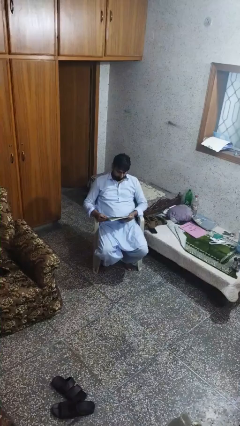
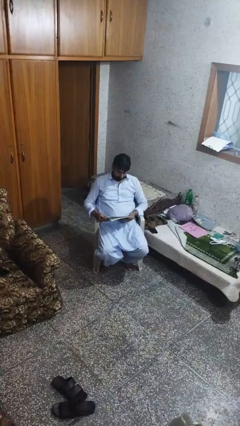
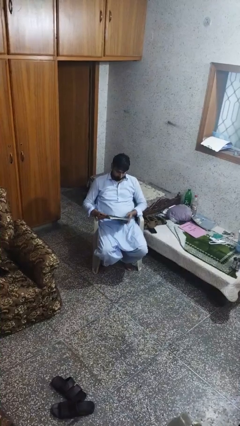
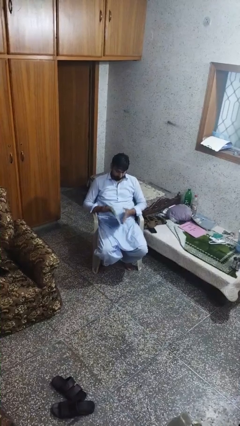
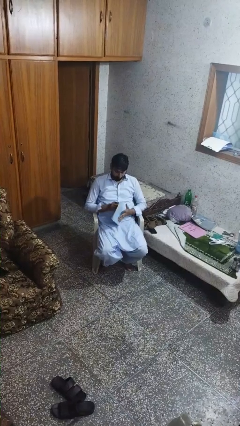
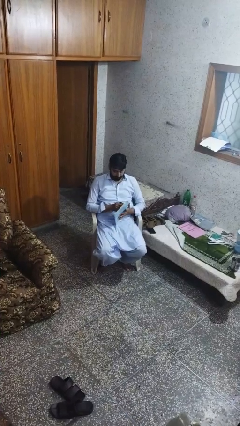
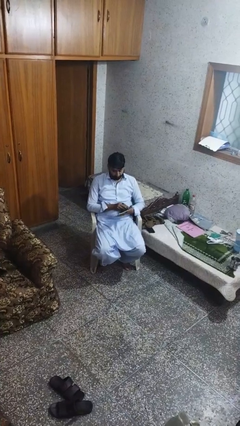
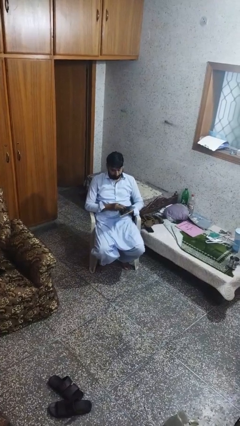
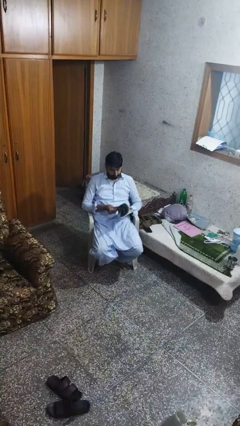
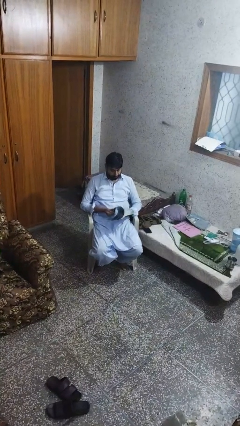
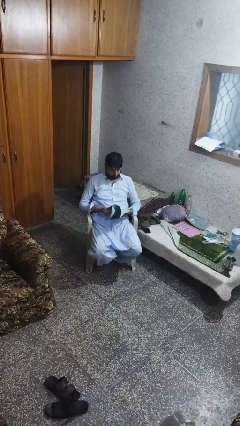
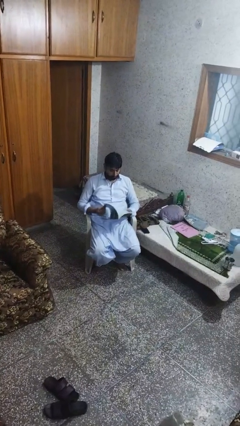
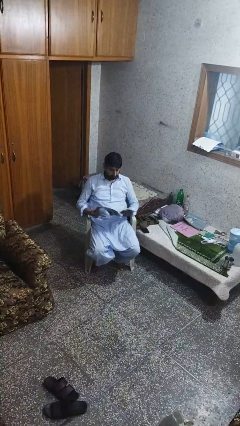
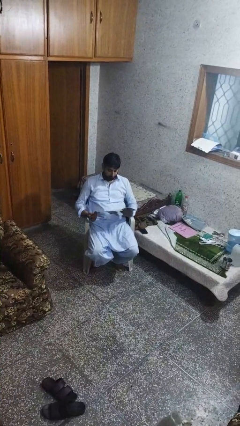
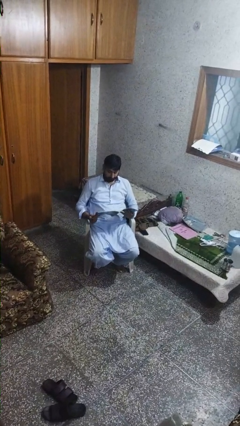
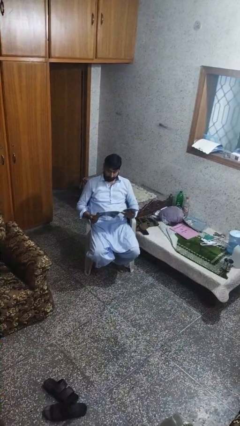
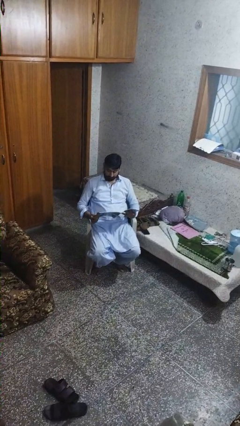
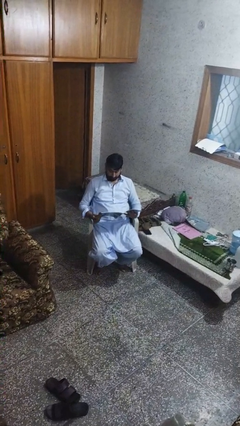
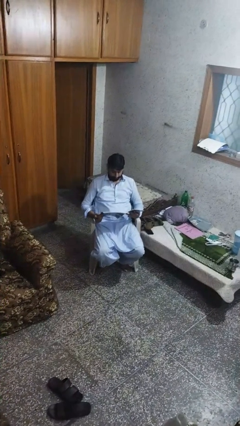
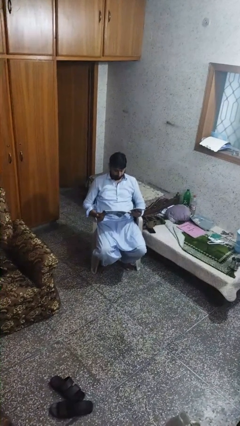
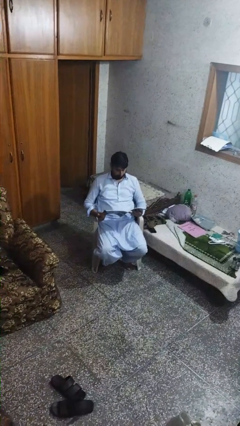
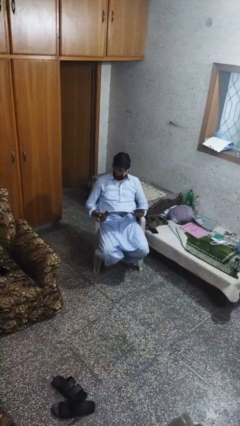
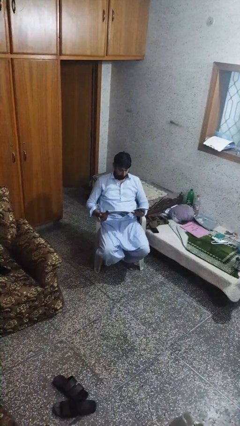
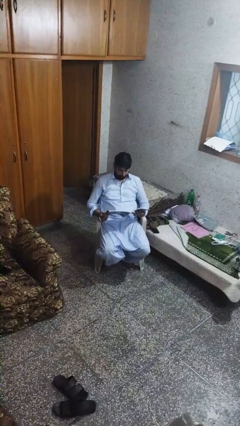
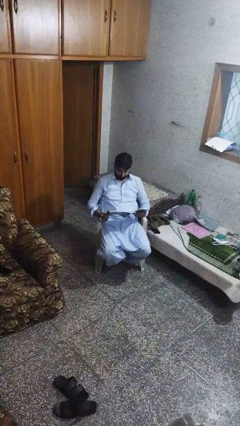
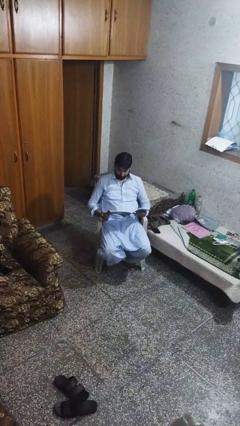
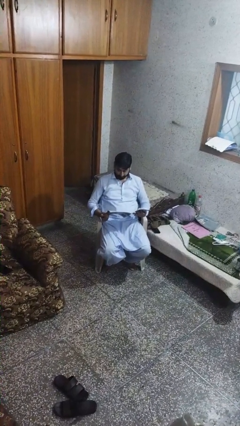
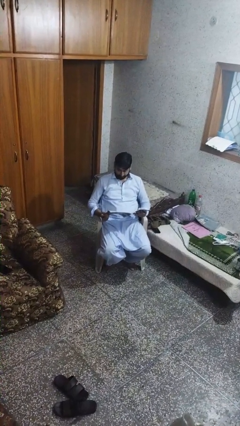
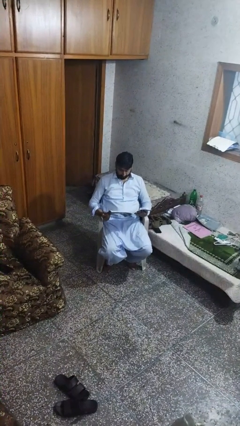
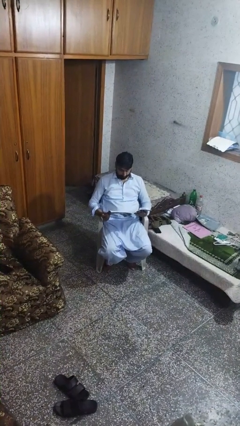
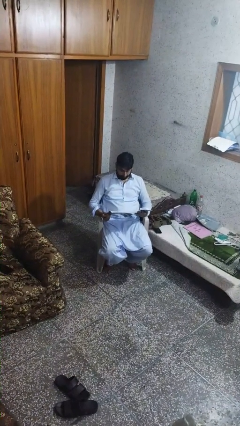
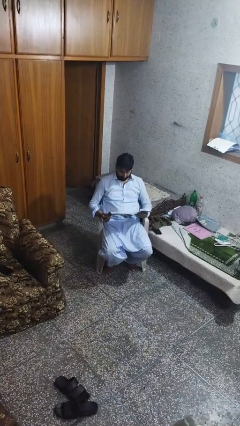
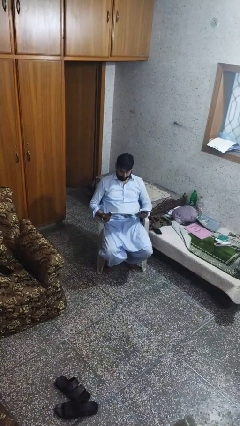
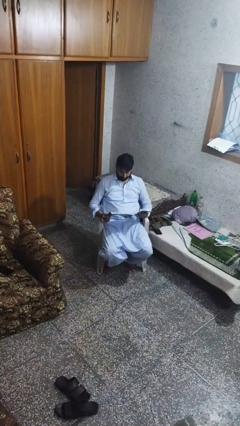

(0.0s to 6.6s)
person reads magazine

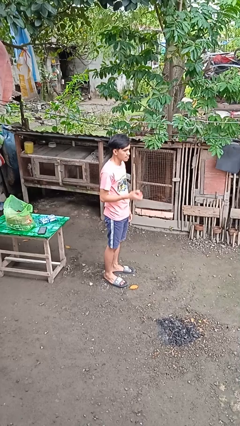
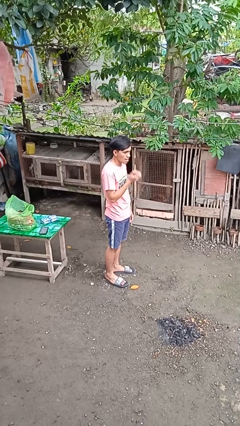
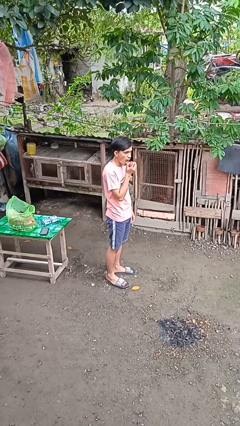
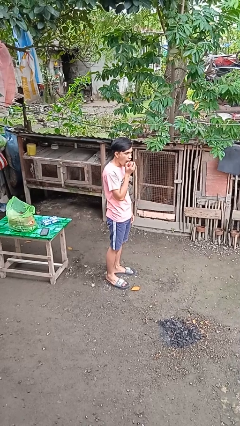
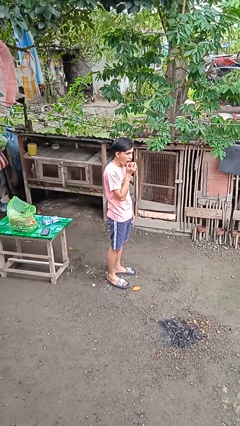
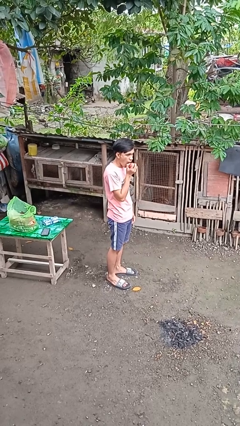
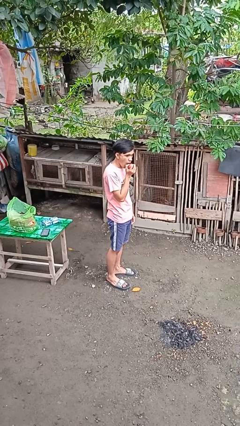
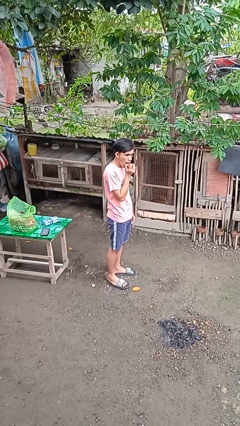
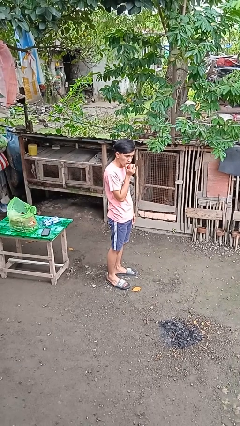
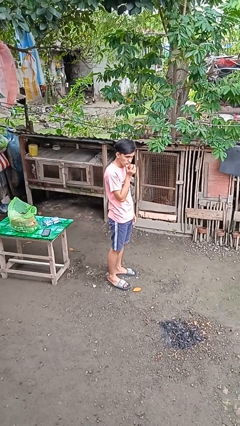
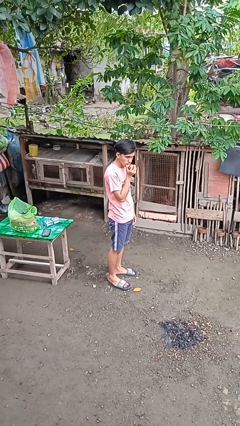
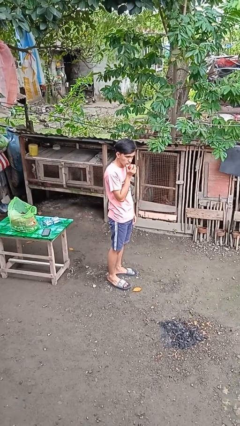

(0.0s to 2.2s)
person eats apple

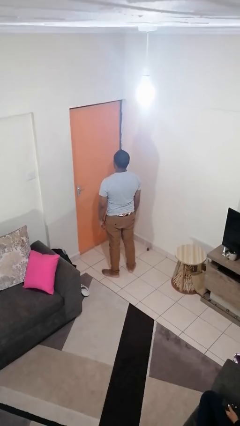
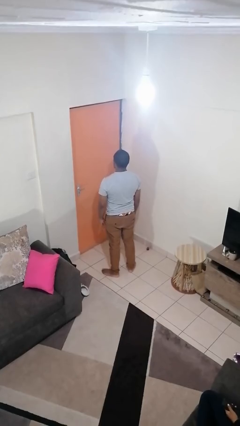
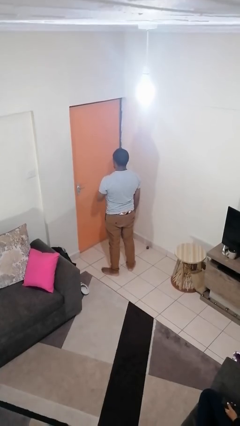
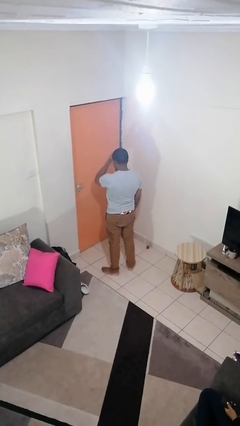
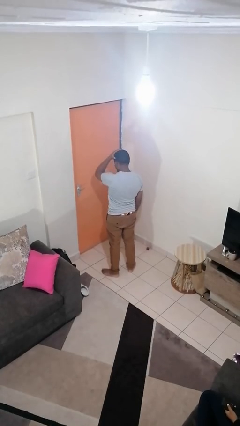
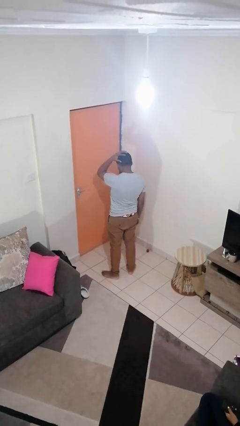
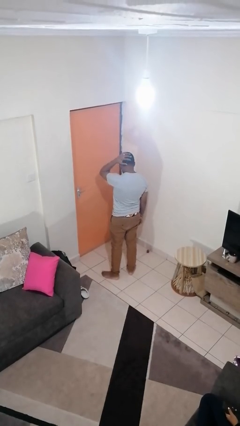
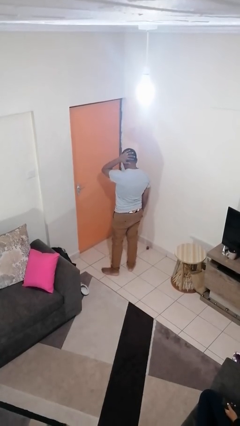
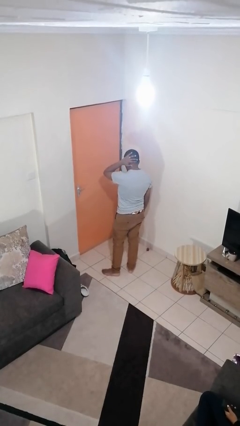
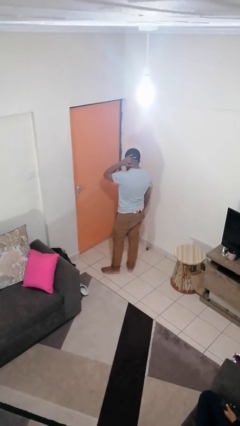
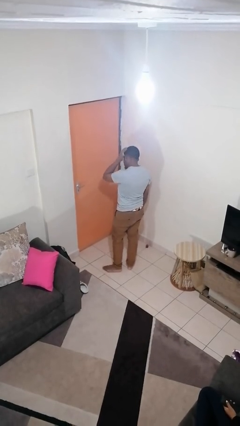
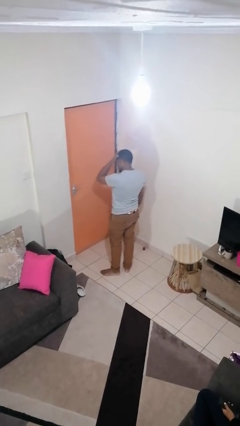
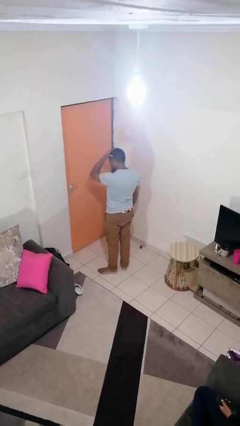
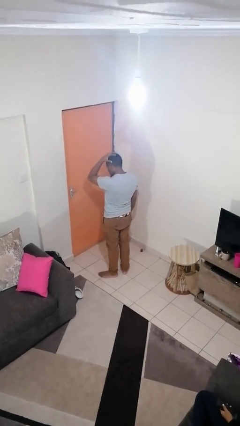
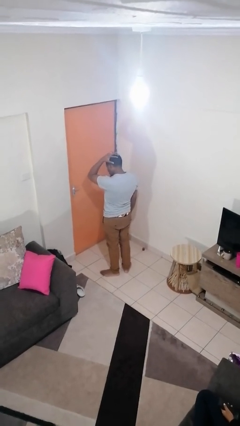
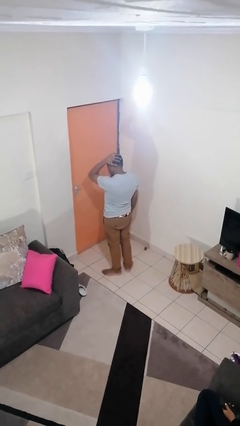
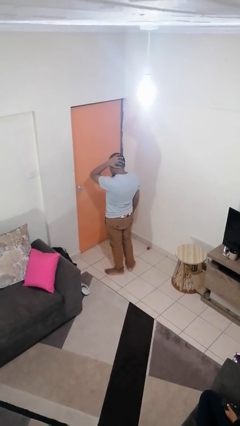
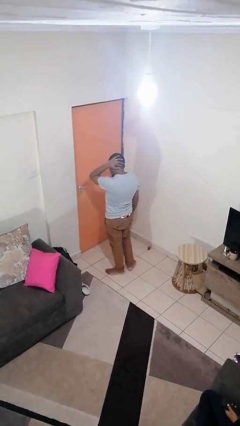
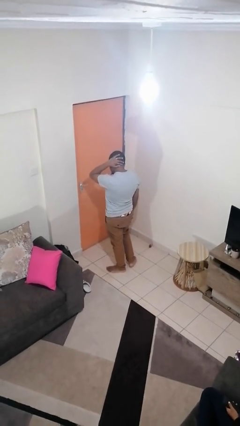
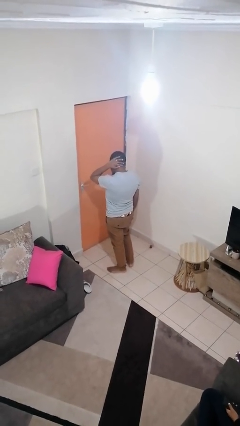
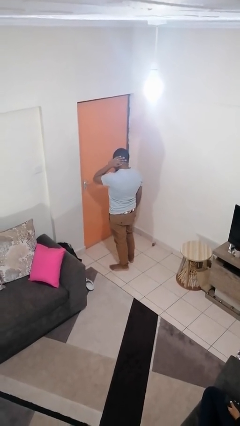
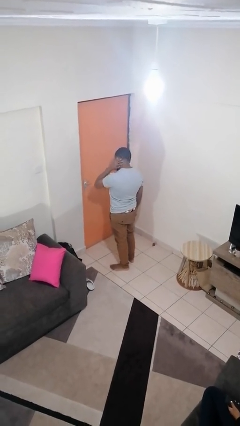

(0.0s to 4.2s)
person strokes hair

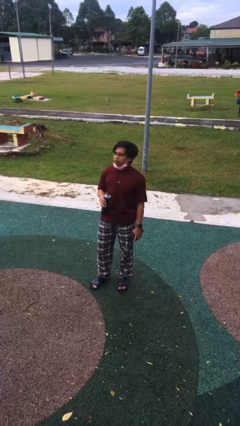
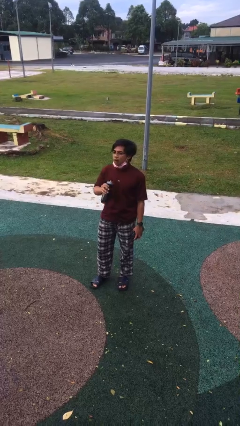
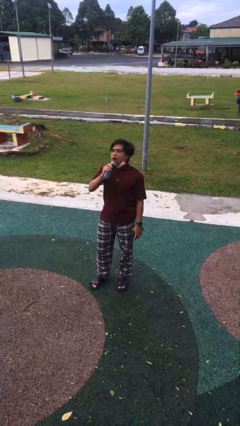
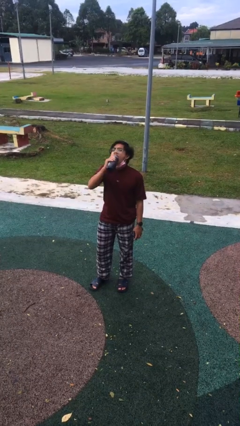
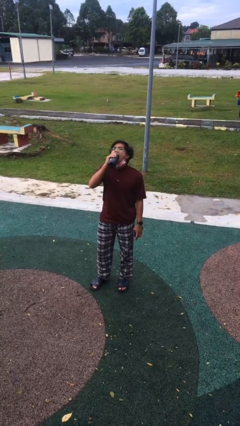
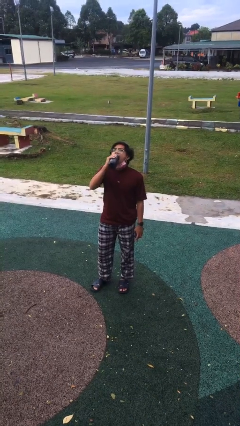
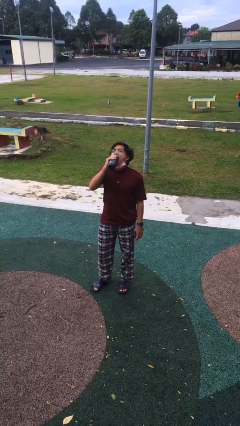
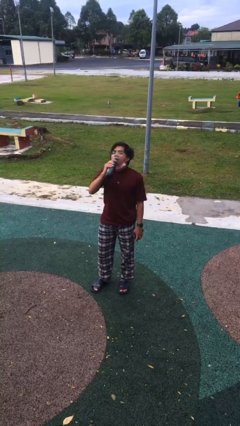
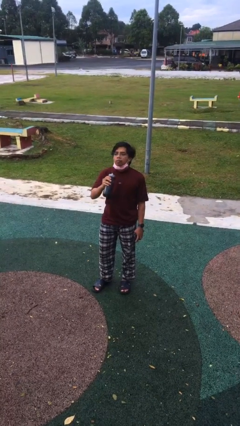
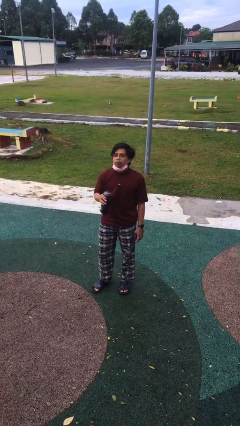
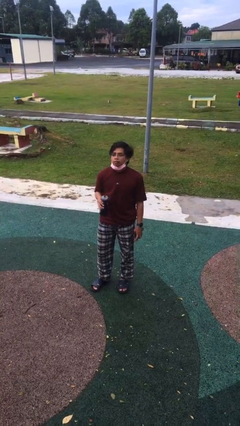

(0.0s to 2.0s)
person drinks from bottle

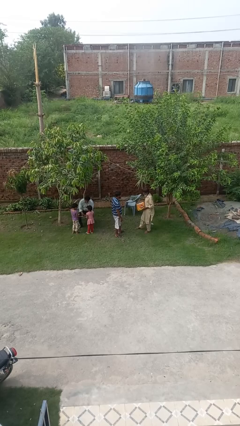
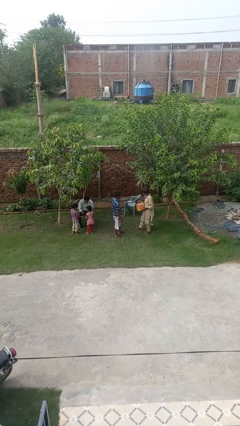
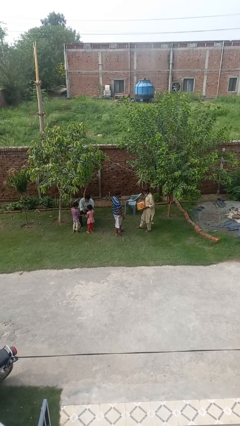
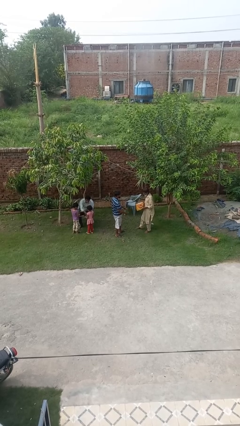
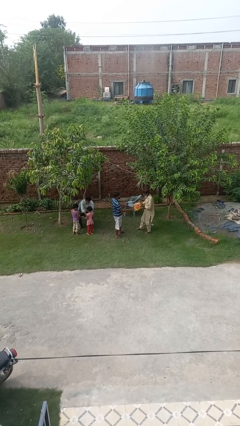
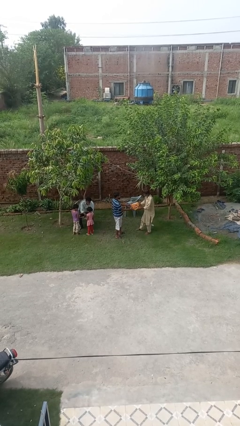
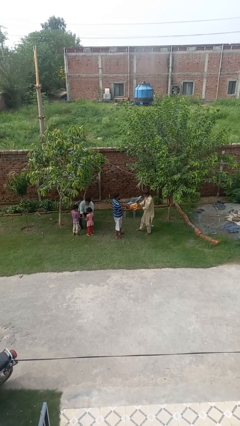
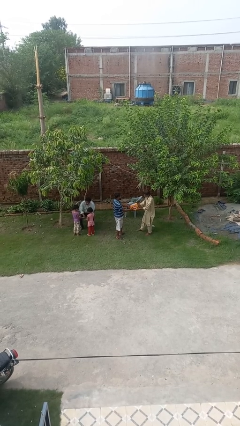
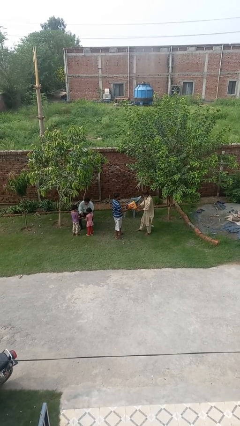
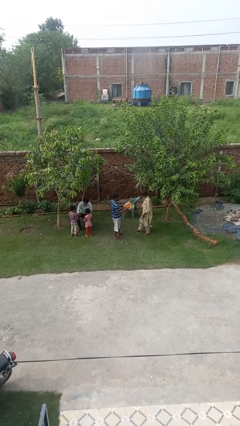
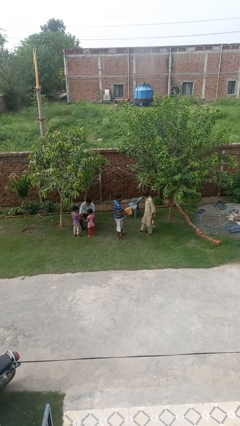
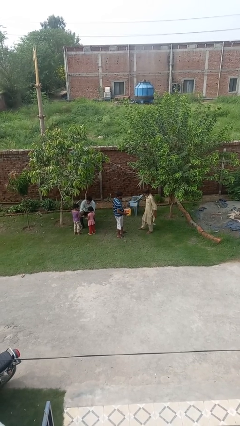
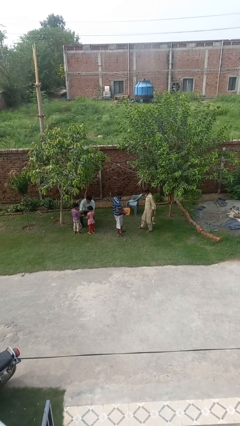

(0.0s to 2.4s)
person transfers object to person

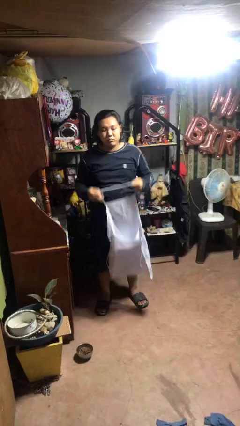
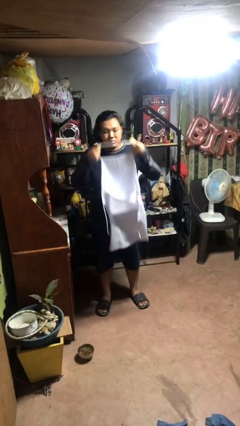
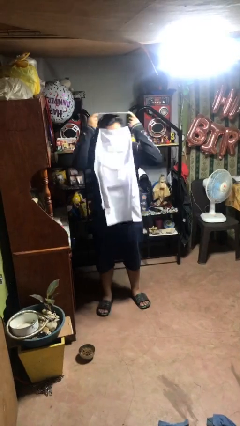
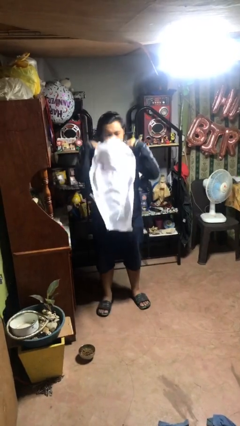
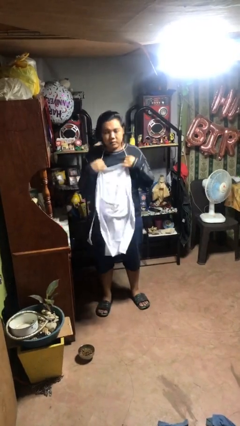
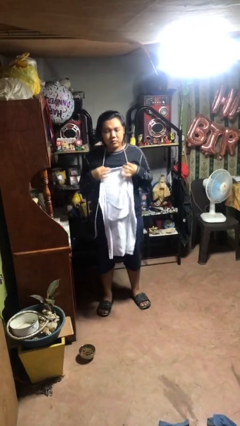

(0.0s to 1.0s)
person puts on apron
